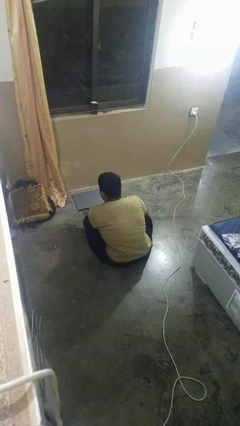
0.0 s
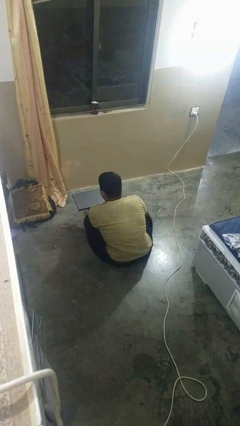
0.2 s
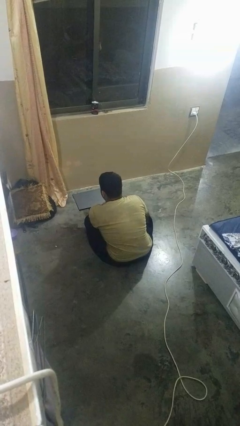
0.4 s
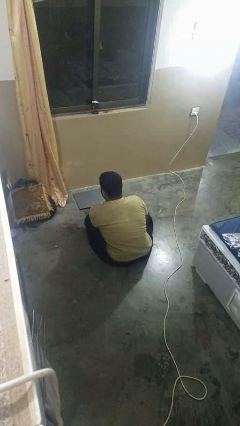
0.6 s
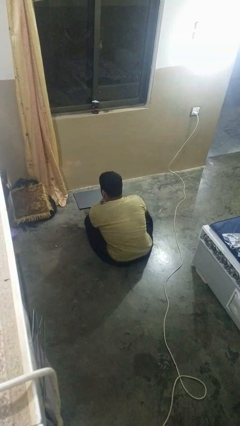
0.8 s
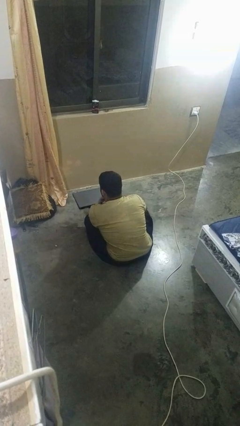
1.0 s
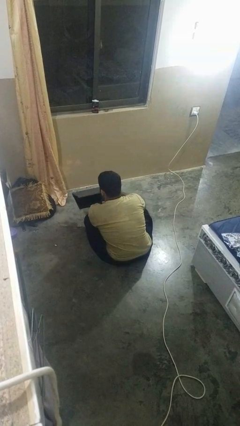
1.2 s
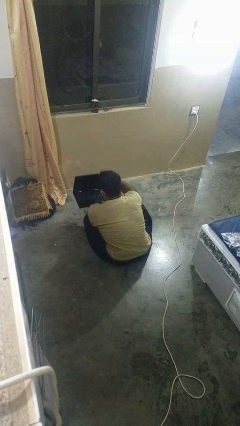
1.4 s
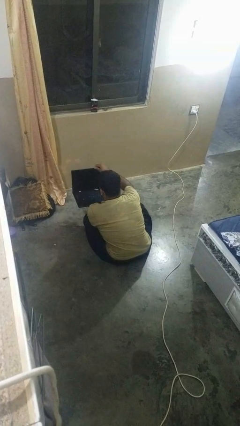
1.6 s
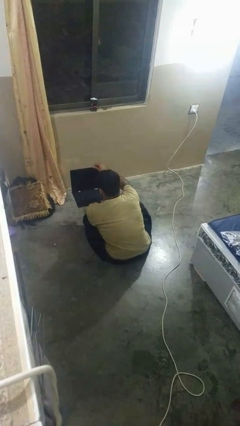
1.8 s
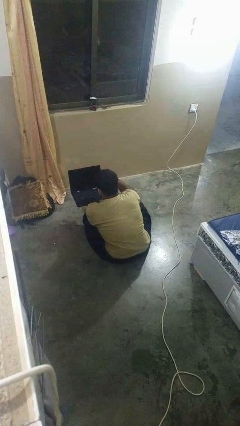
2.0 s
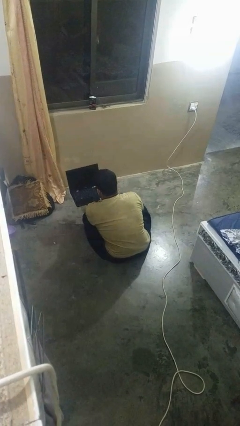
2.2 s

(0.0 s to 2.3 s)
person opens laptop

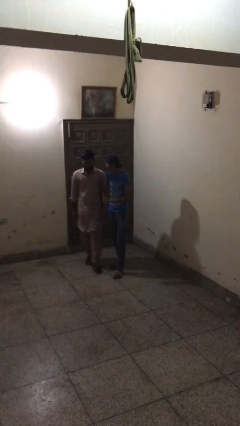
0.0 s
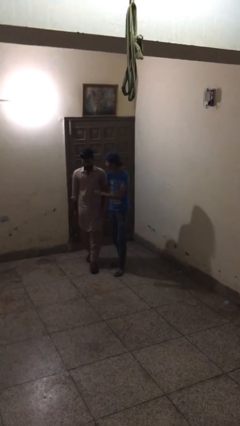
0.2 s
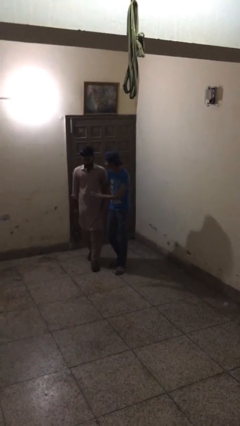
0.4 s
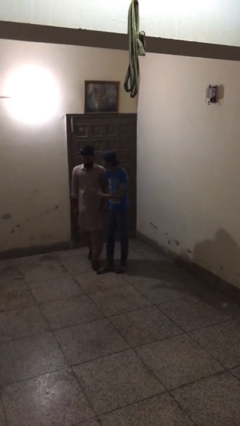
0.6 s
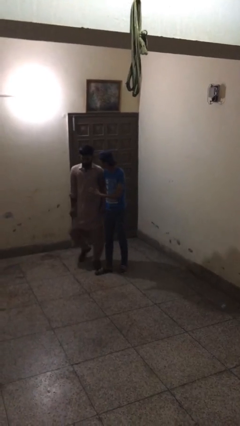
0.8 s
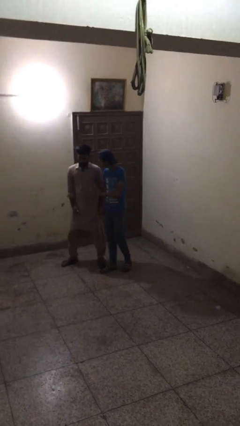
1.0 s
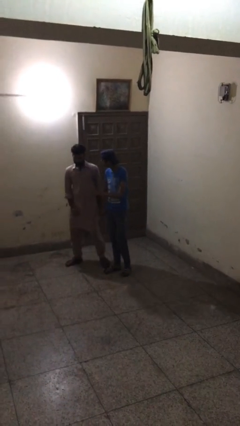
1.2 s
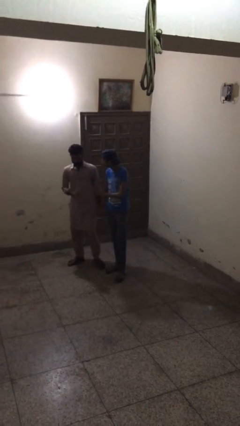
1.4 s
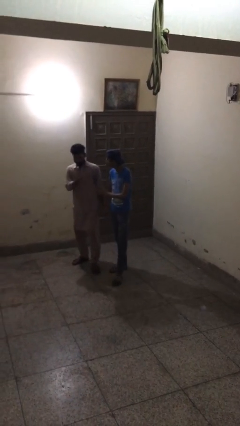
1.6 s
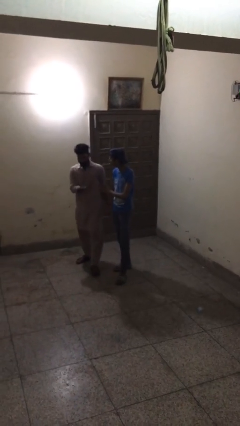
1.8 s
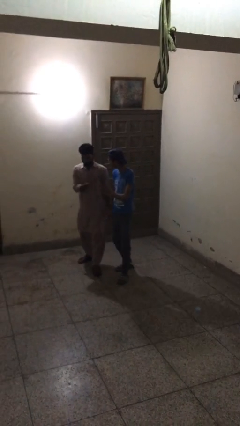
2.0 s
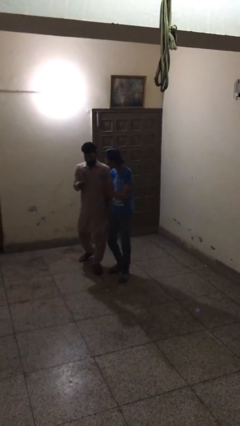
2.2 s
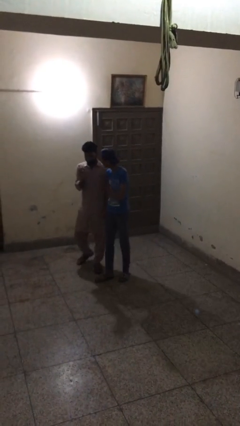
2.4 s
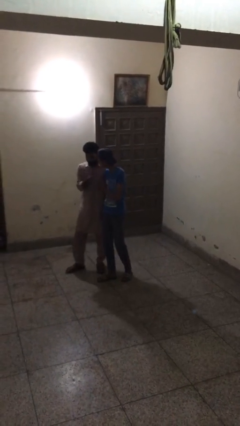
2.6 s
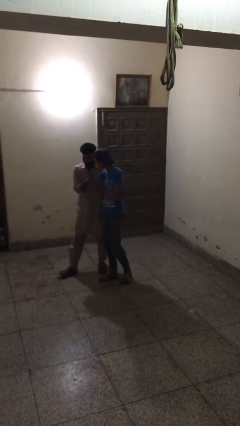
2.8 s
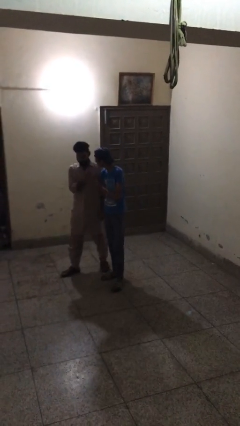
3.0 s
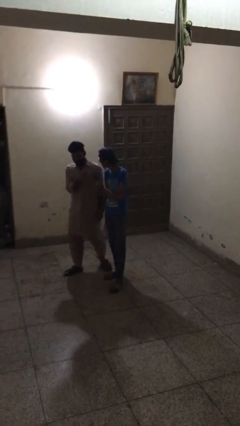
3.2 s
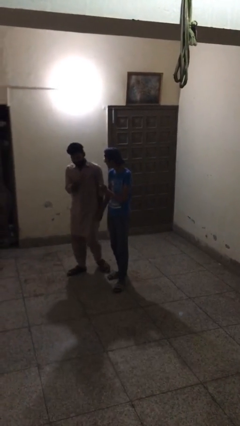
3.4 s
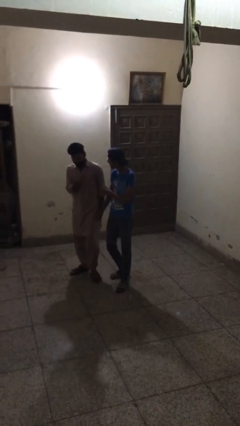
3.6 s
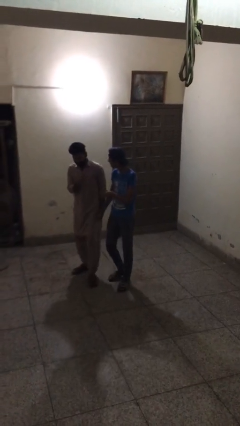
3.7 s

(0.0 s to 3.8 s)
person holds hand

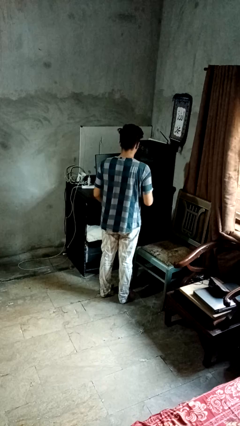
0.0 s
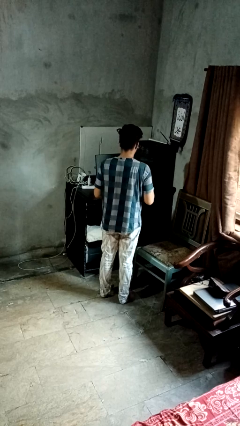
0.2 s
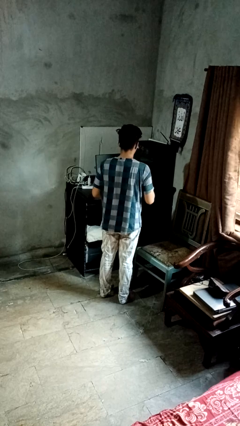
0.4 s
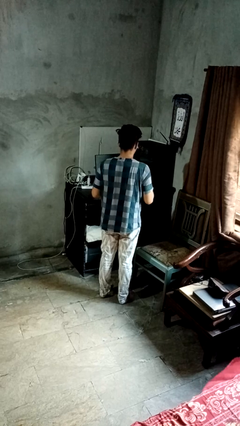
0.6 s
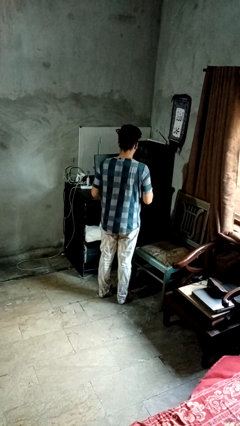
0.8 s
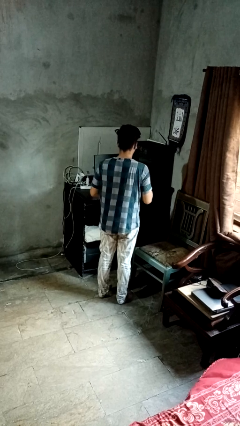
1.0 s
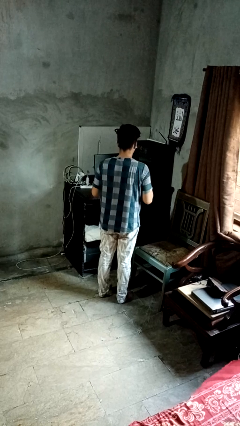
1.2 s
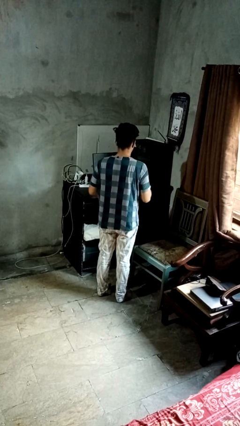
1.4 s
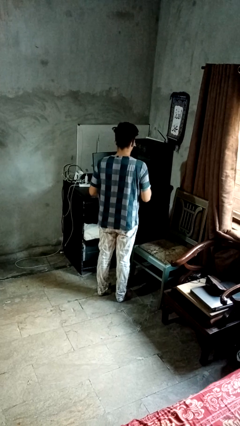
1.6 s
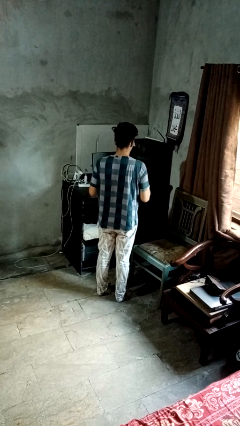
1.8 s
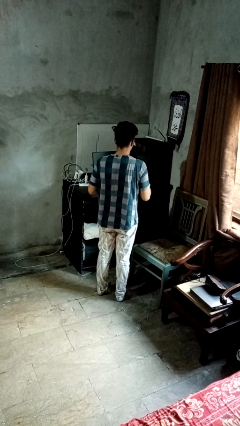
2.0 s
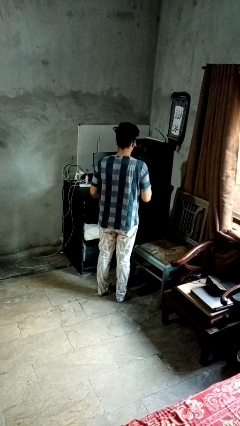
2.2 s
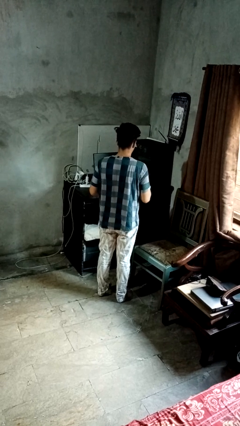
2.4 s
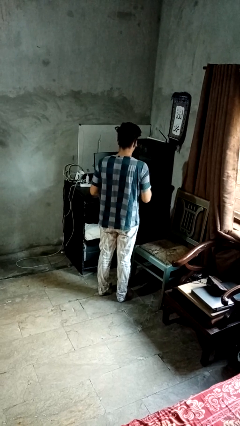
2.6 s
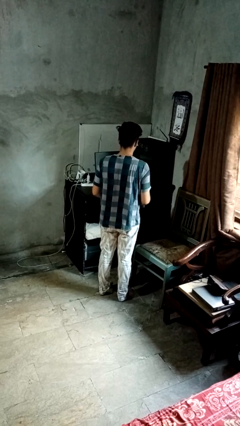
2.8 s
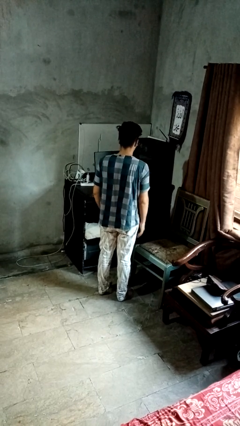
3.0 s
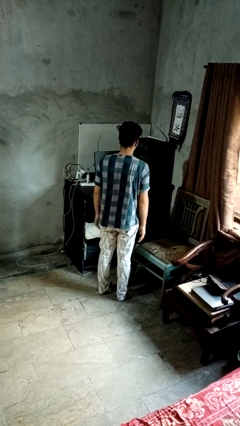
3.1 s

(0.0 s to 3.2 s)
person drums on chest

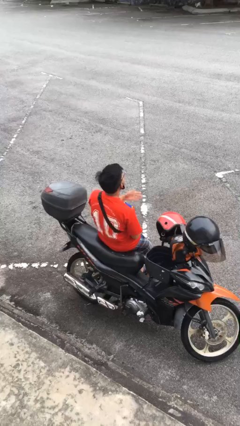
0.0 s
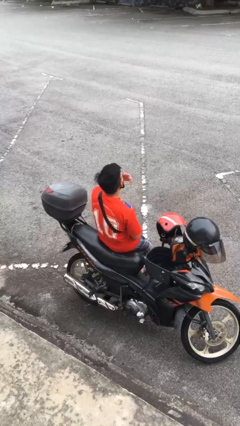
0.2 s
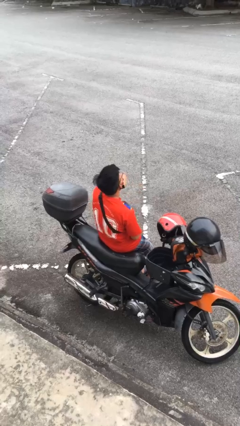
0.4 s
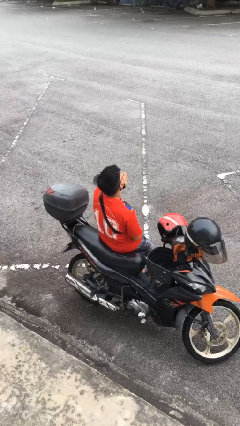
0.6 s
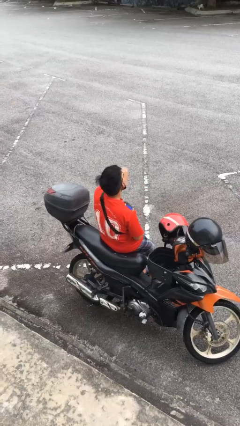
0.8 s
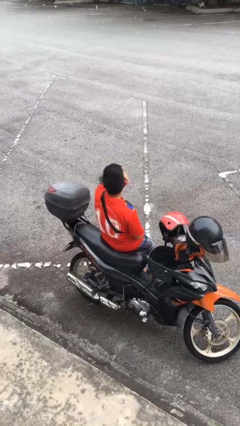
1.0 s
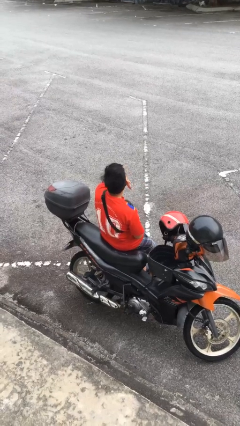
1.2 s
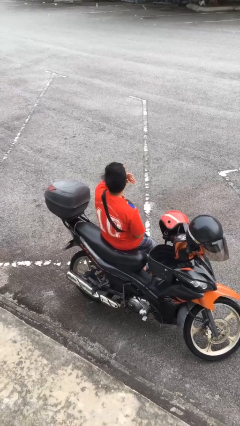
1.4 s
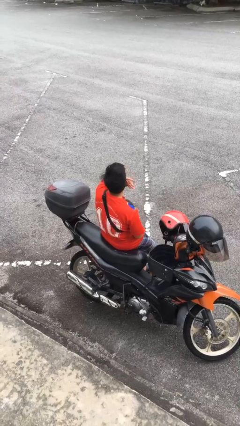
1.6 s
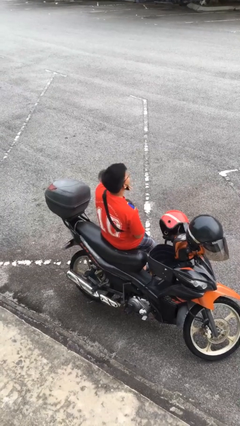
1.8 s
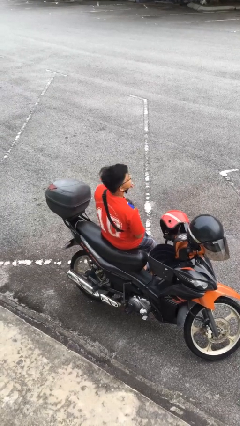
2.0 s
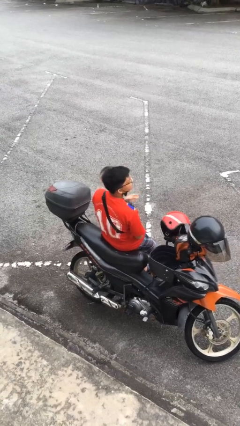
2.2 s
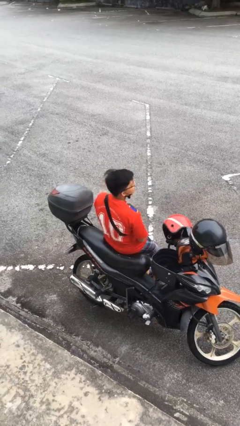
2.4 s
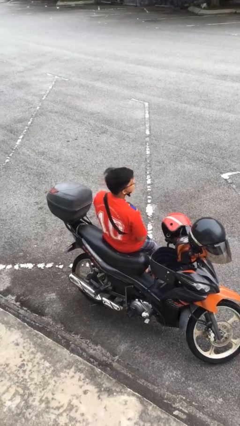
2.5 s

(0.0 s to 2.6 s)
person scratches face

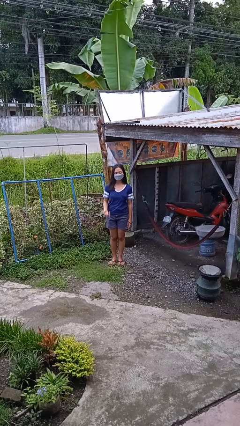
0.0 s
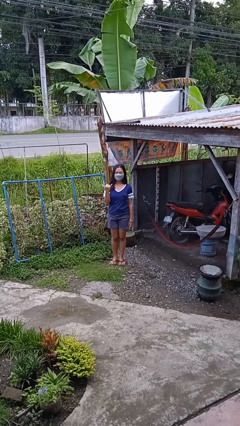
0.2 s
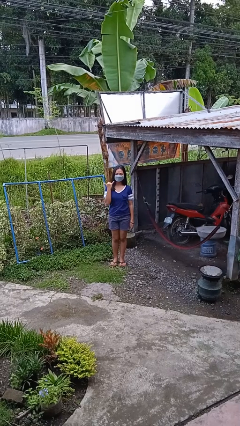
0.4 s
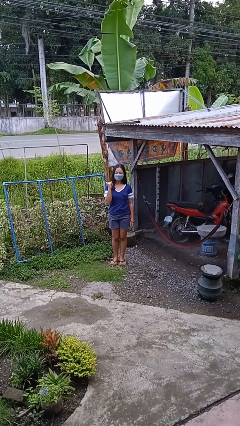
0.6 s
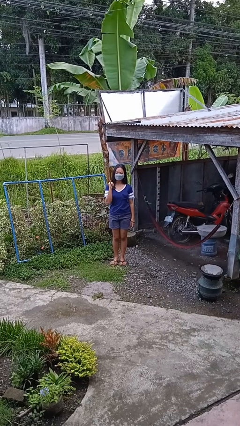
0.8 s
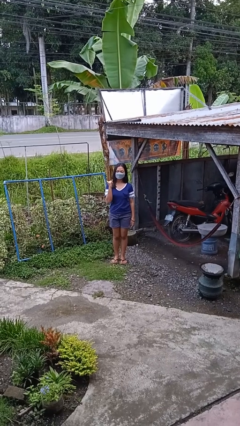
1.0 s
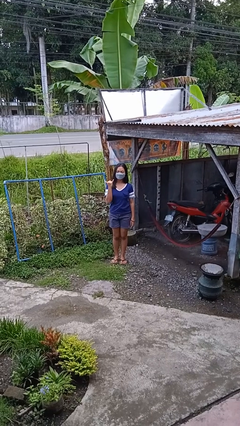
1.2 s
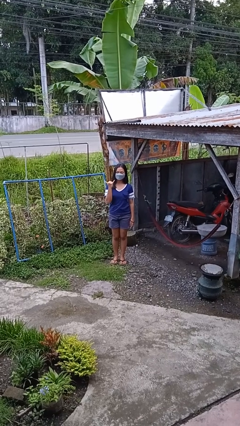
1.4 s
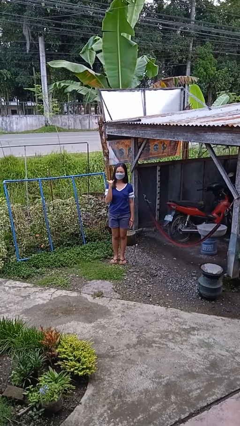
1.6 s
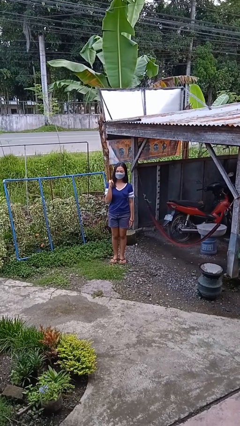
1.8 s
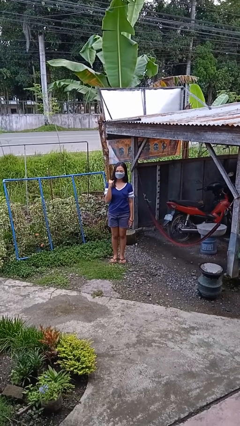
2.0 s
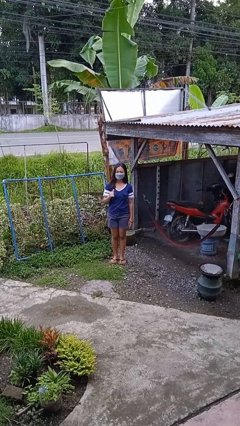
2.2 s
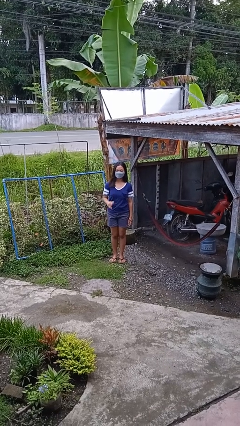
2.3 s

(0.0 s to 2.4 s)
person gestures hang loose

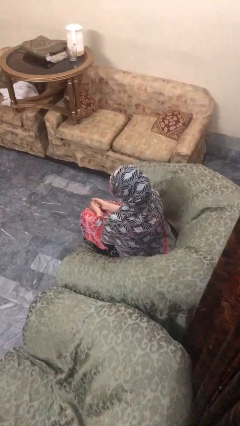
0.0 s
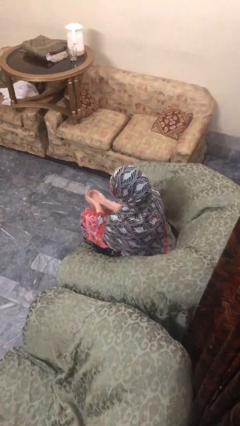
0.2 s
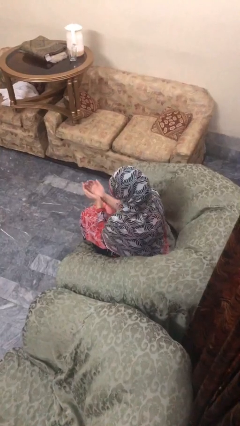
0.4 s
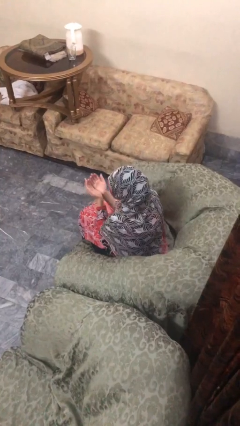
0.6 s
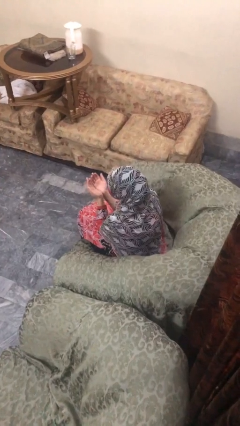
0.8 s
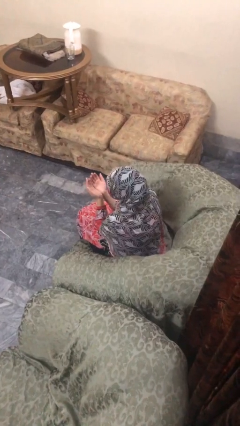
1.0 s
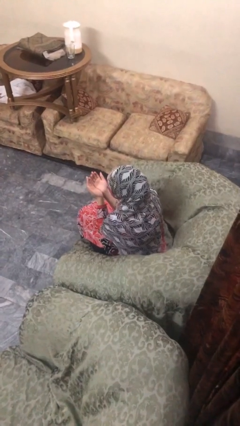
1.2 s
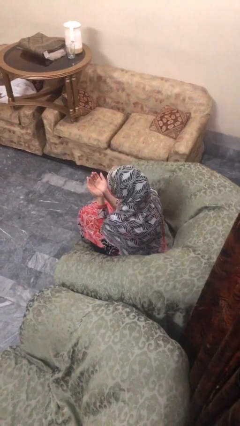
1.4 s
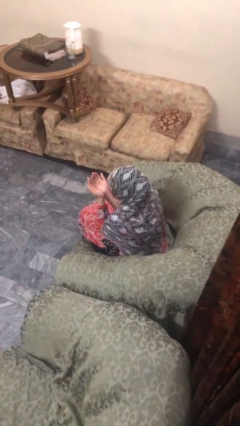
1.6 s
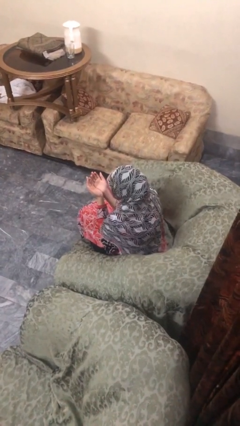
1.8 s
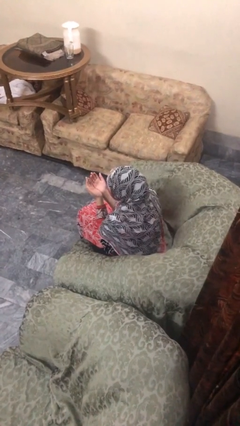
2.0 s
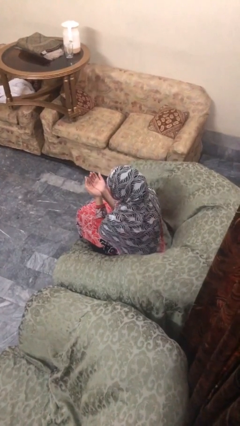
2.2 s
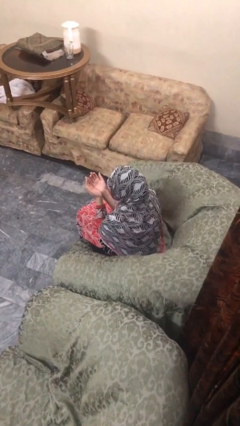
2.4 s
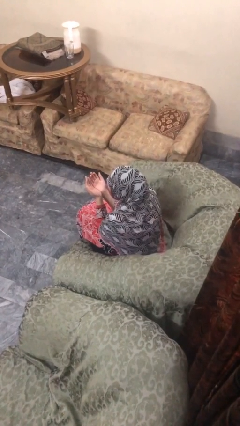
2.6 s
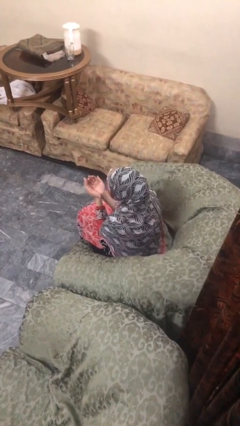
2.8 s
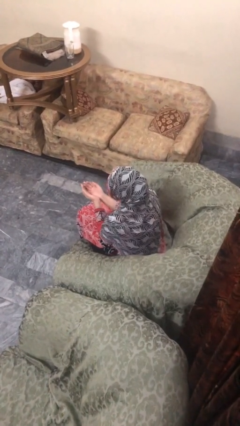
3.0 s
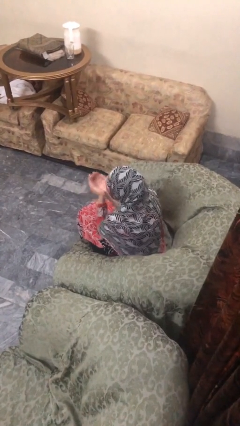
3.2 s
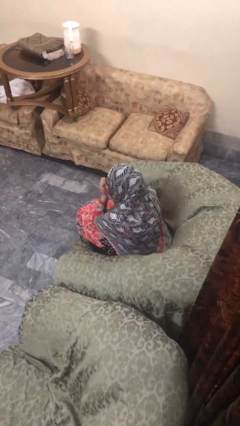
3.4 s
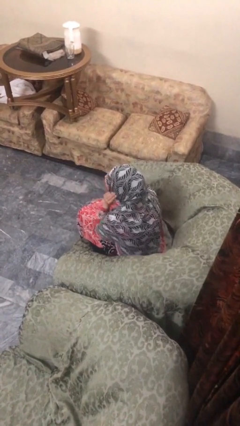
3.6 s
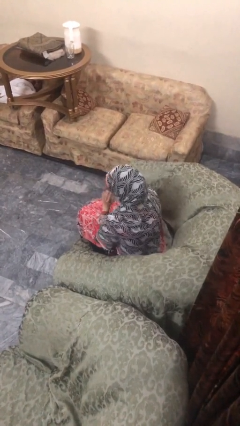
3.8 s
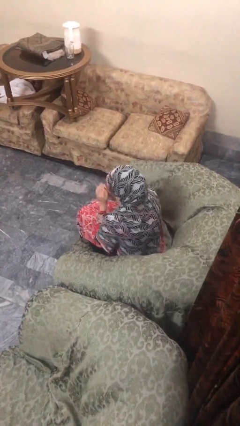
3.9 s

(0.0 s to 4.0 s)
person prays
